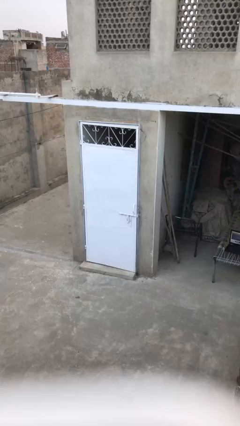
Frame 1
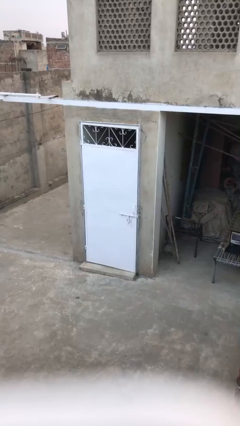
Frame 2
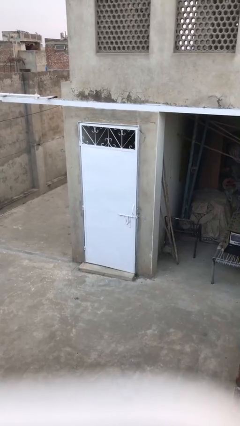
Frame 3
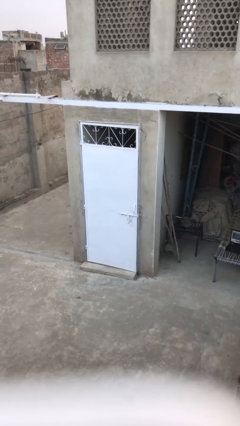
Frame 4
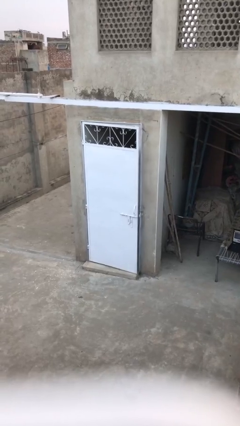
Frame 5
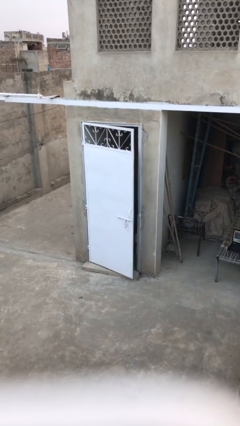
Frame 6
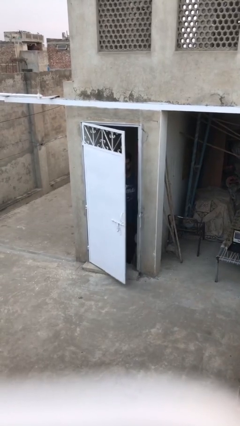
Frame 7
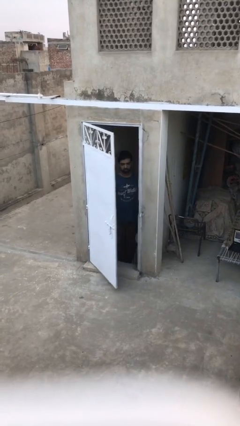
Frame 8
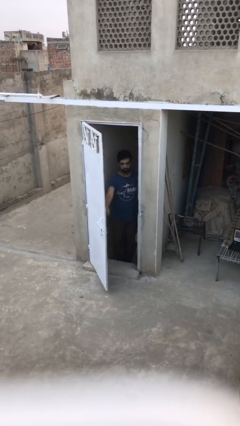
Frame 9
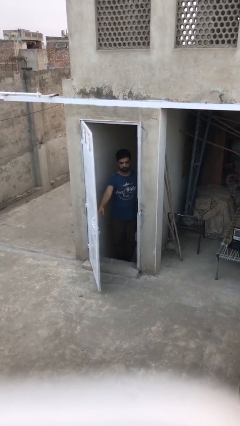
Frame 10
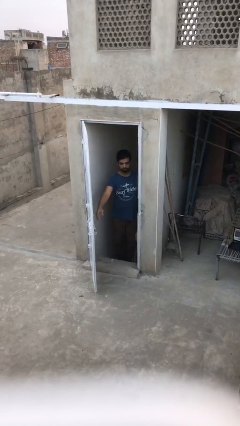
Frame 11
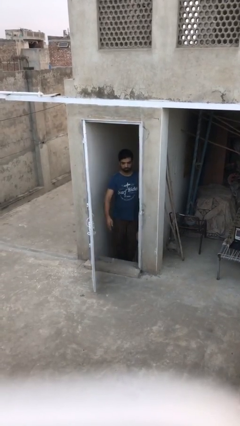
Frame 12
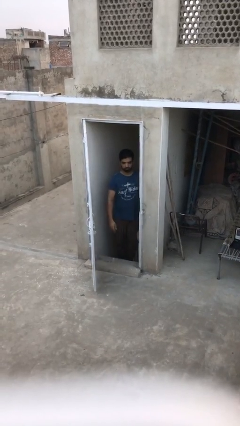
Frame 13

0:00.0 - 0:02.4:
person opens facility door

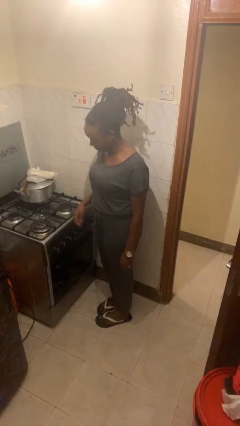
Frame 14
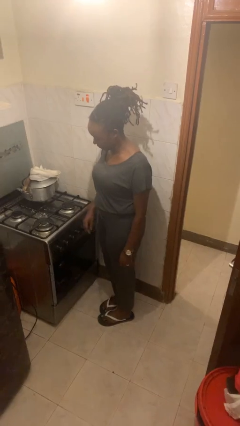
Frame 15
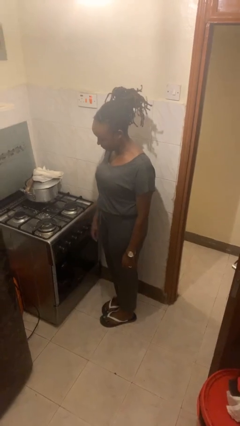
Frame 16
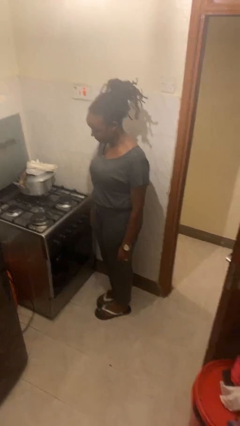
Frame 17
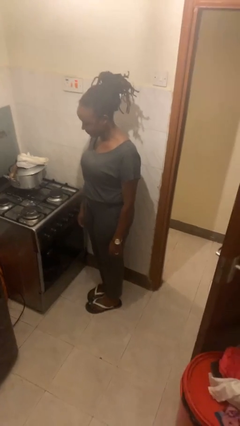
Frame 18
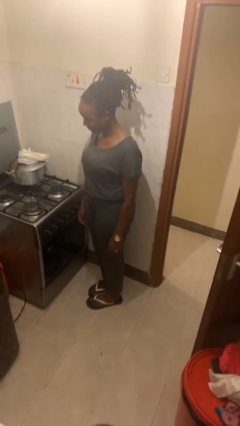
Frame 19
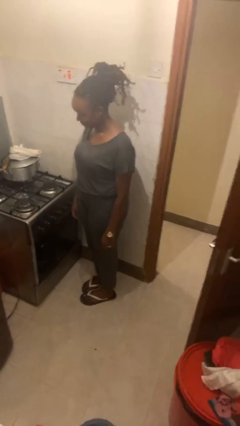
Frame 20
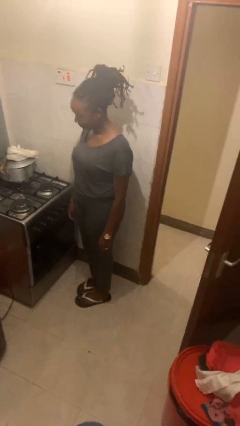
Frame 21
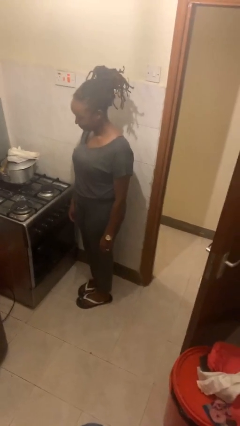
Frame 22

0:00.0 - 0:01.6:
person burns hand

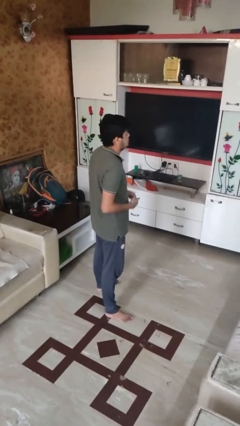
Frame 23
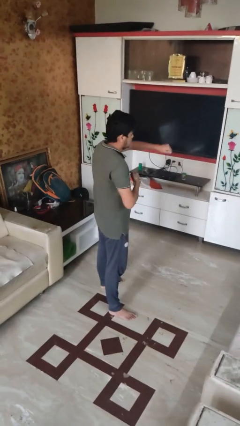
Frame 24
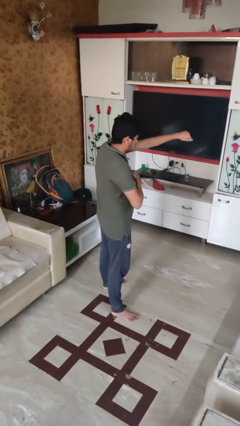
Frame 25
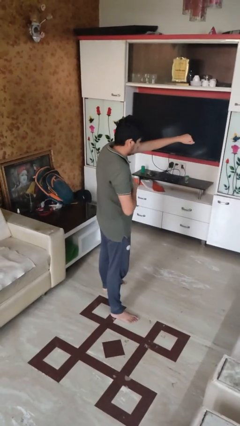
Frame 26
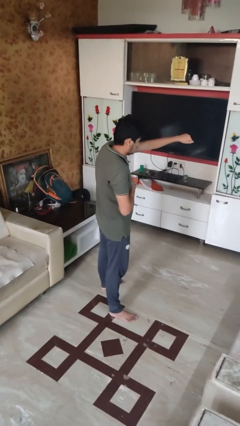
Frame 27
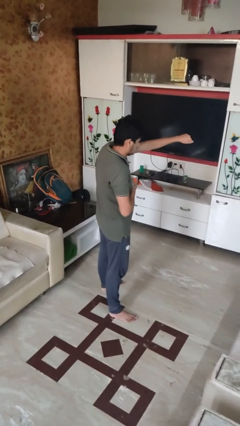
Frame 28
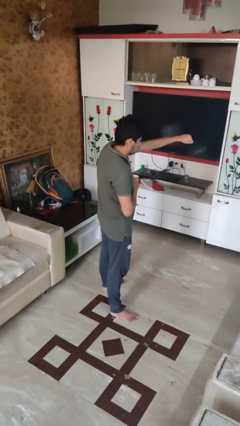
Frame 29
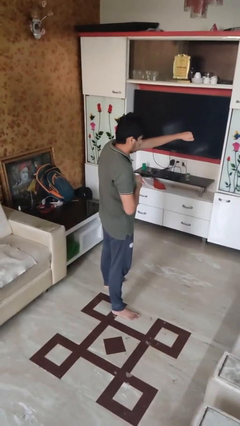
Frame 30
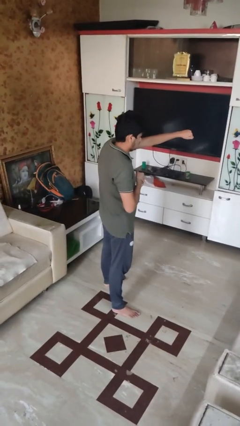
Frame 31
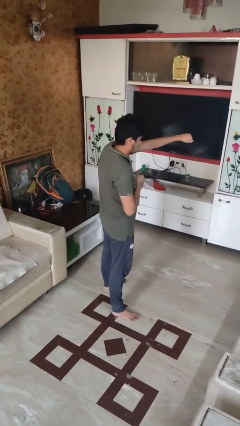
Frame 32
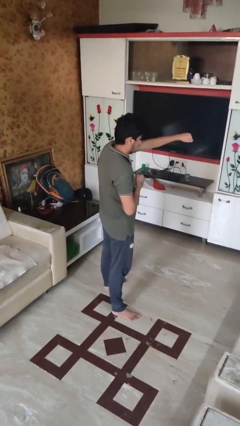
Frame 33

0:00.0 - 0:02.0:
person punches

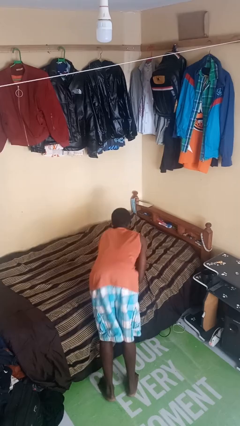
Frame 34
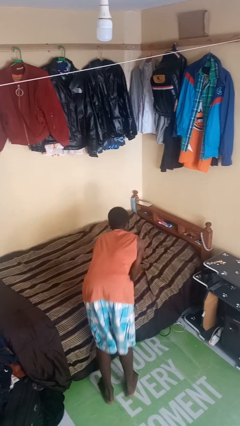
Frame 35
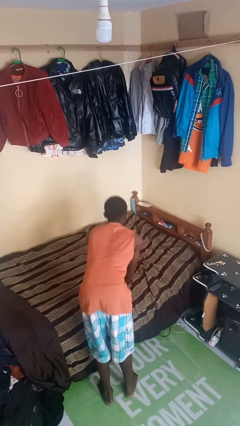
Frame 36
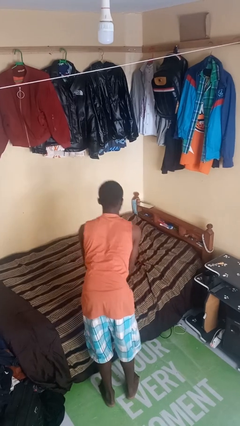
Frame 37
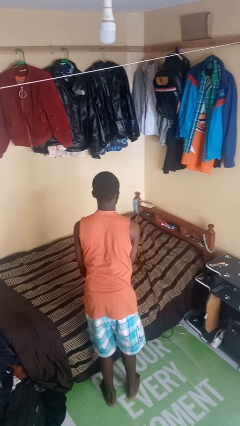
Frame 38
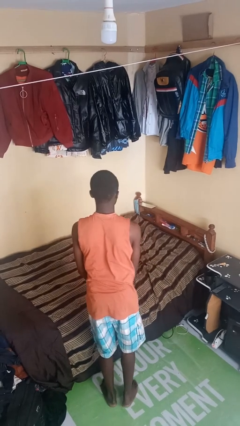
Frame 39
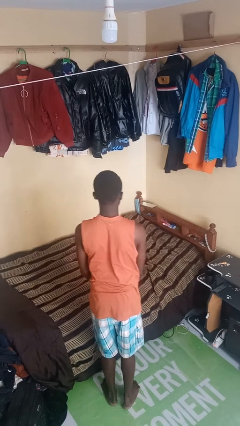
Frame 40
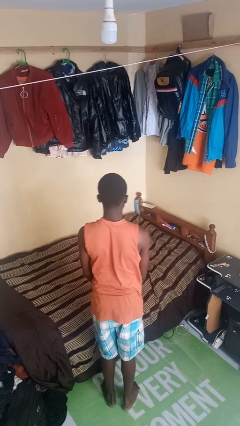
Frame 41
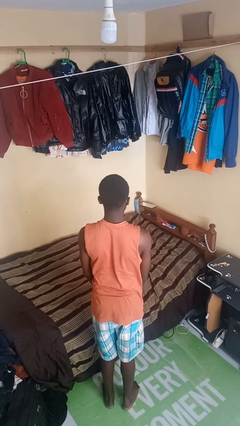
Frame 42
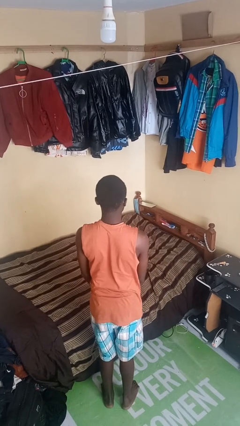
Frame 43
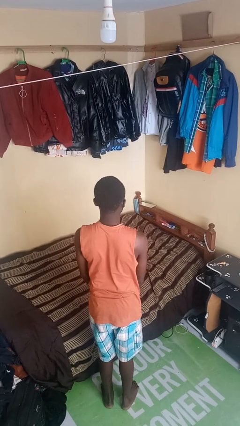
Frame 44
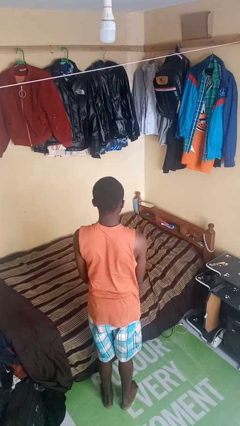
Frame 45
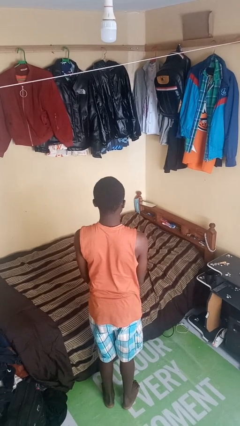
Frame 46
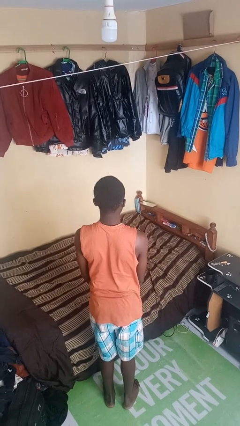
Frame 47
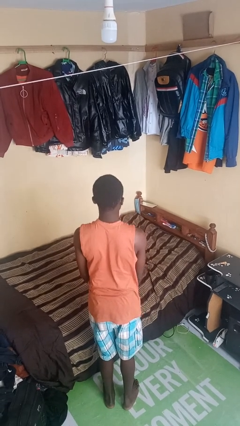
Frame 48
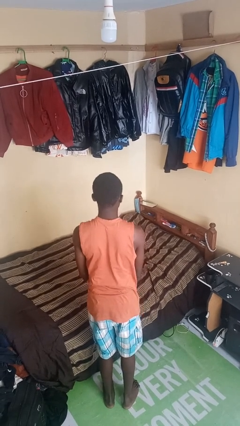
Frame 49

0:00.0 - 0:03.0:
person stands up

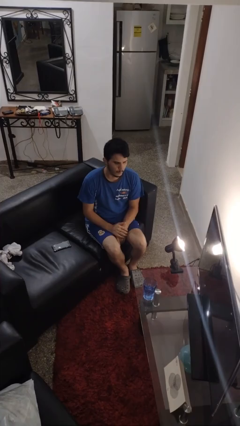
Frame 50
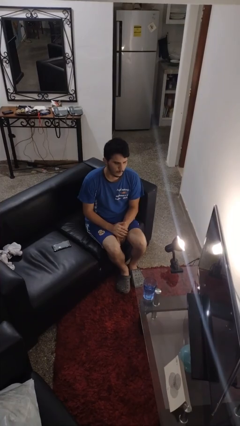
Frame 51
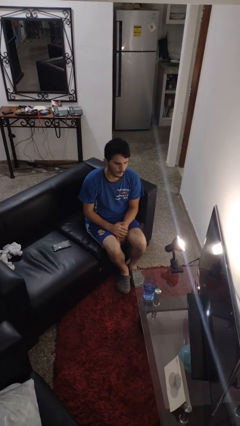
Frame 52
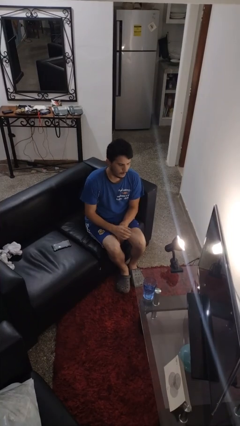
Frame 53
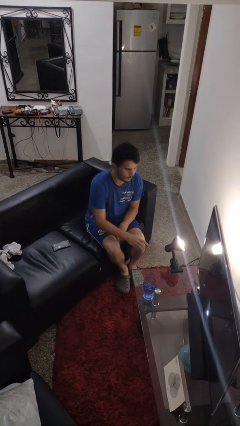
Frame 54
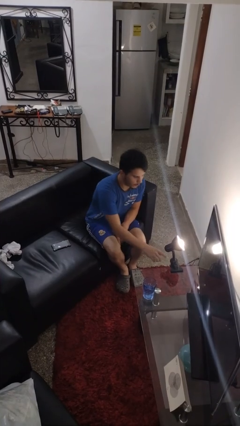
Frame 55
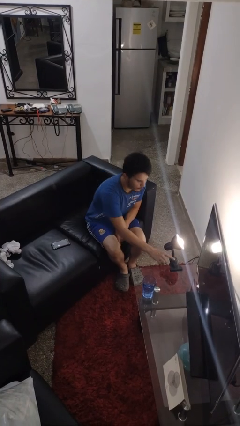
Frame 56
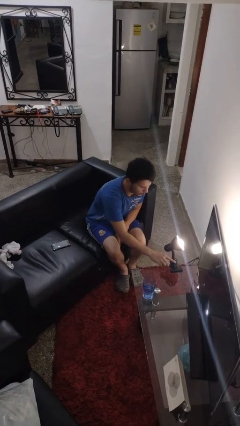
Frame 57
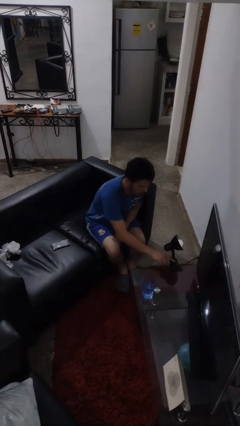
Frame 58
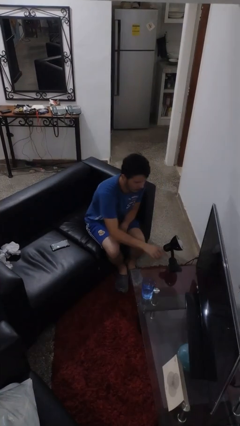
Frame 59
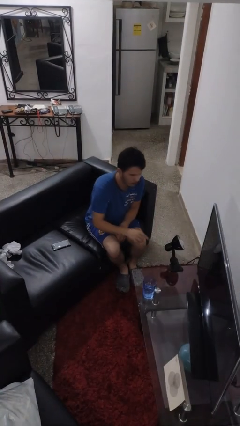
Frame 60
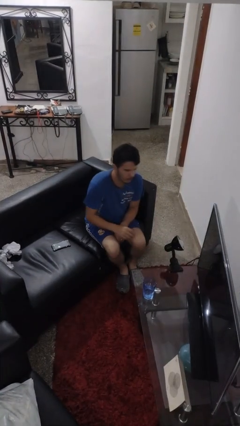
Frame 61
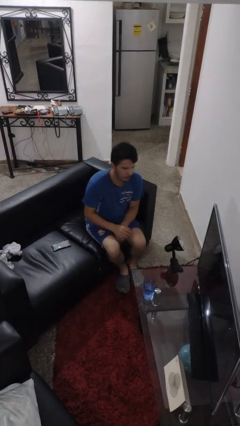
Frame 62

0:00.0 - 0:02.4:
person turns off lamp

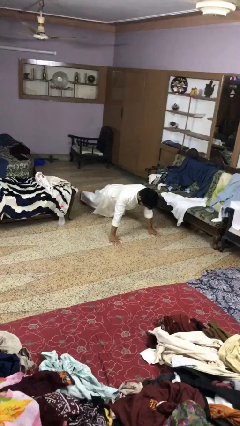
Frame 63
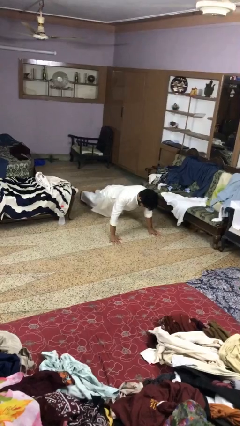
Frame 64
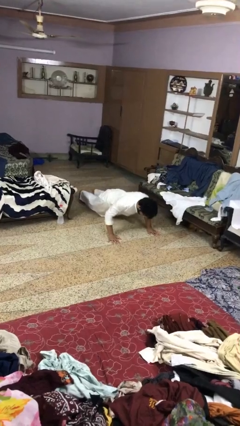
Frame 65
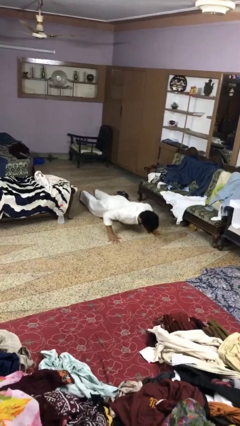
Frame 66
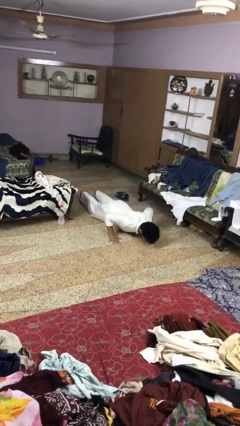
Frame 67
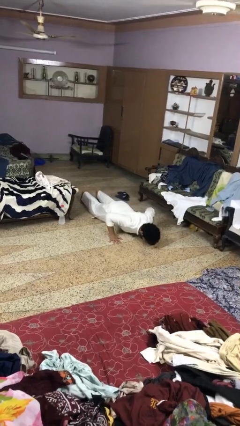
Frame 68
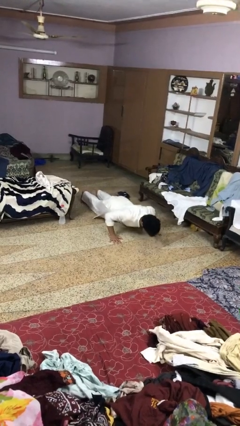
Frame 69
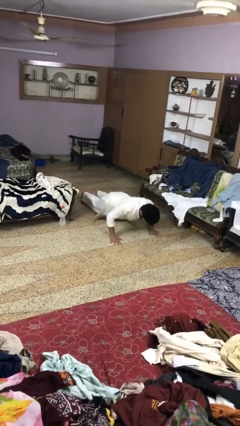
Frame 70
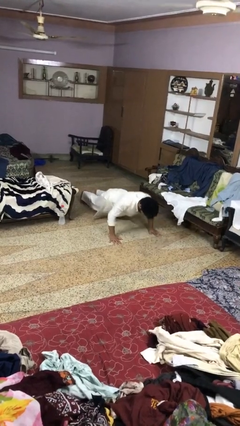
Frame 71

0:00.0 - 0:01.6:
person exercises with pushup

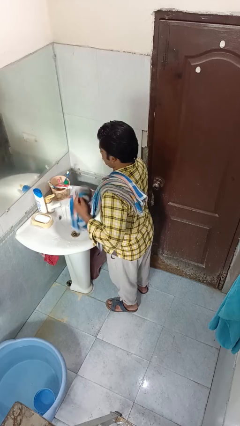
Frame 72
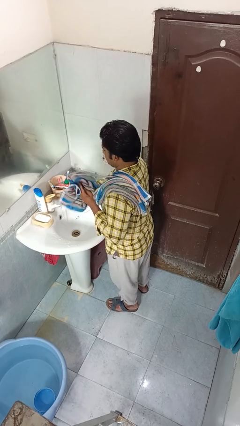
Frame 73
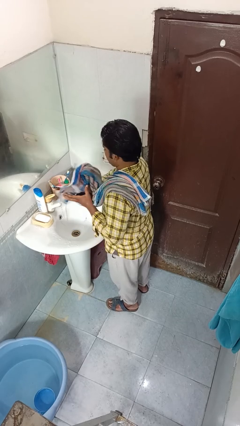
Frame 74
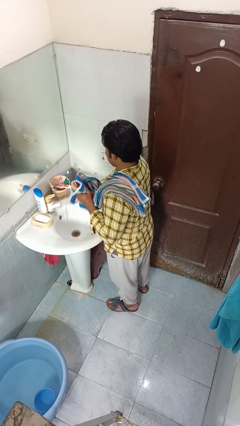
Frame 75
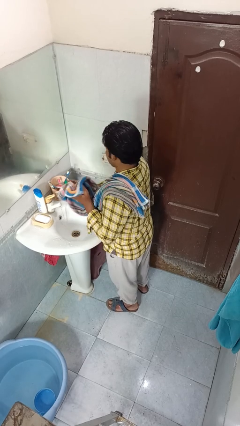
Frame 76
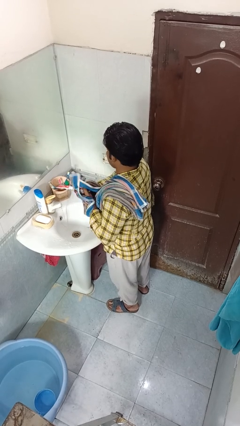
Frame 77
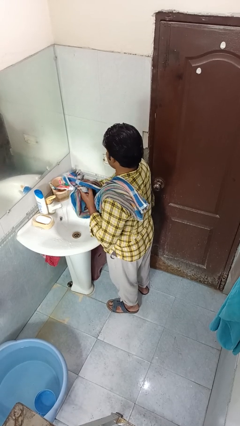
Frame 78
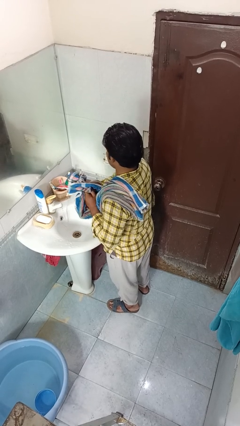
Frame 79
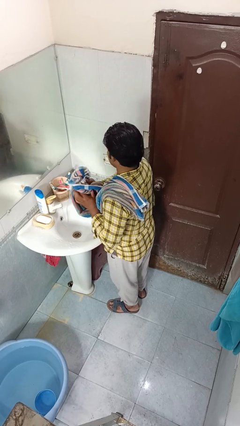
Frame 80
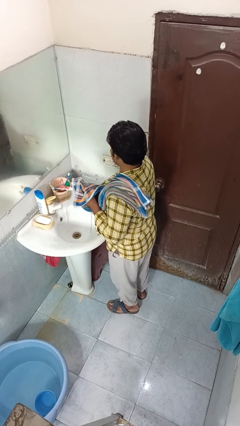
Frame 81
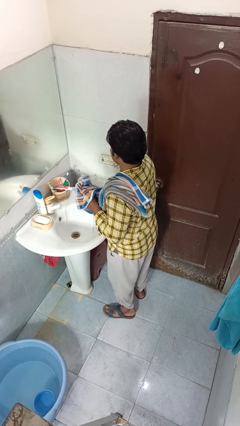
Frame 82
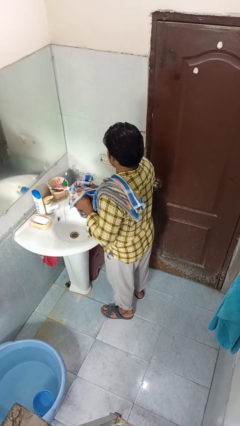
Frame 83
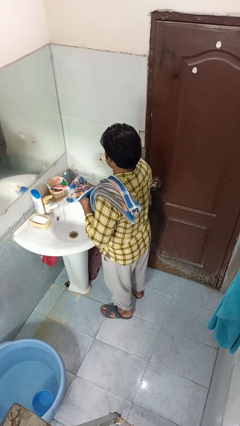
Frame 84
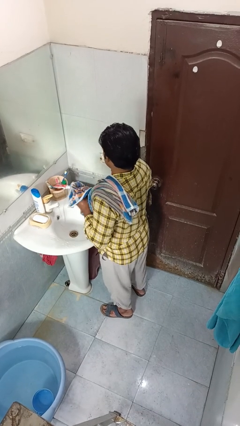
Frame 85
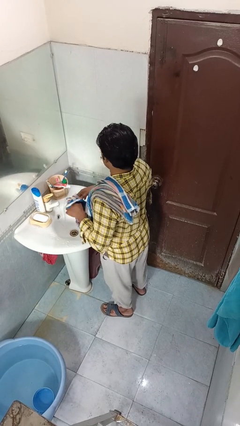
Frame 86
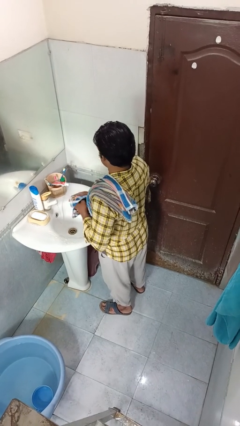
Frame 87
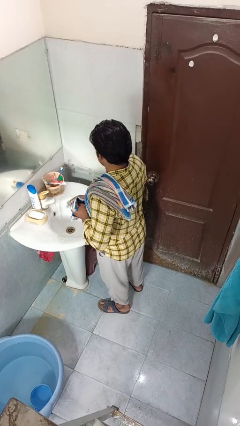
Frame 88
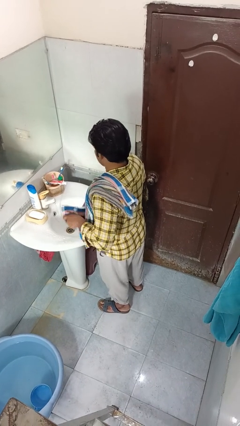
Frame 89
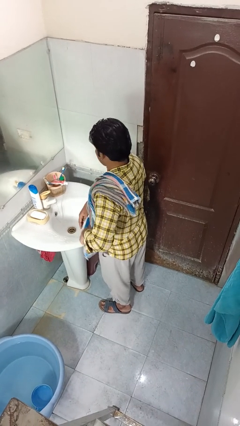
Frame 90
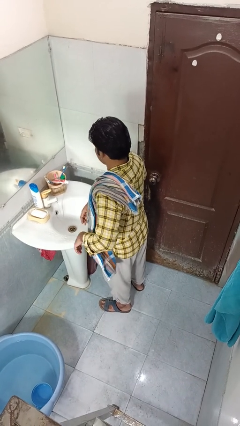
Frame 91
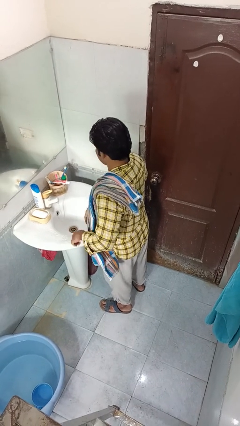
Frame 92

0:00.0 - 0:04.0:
person dries hands with towel
